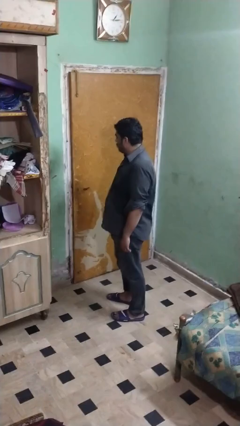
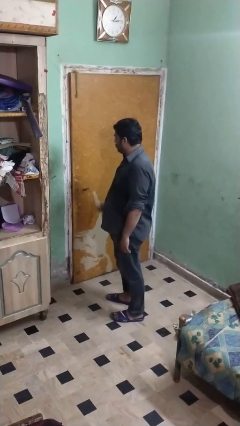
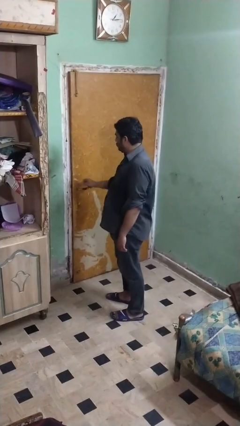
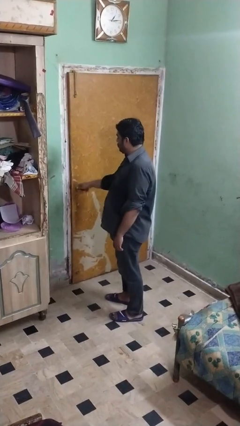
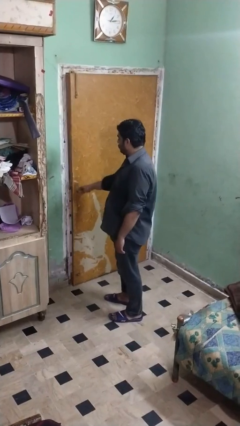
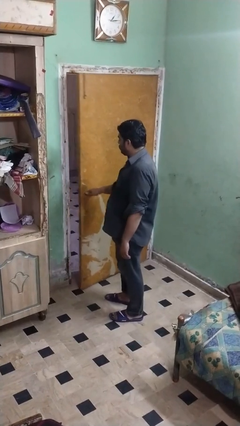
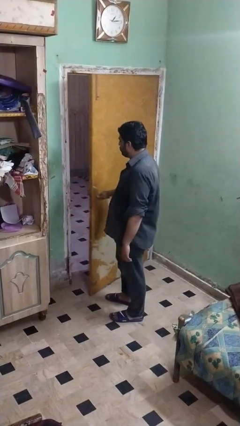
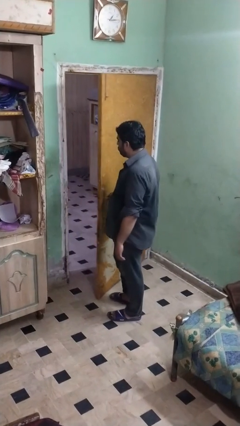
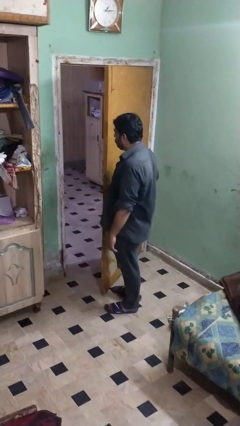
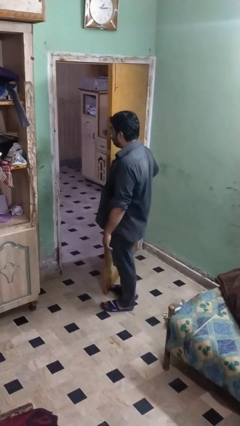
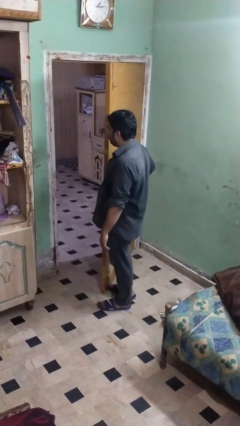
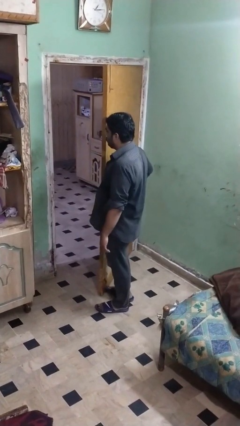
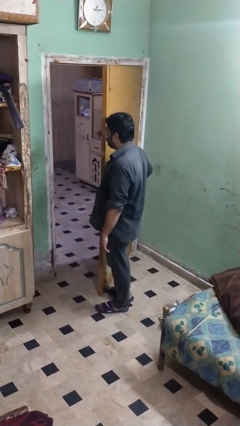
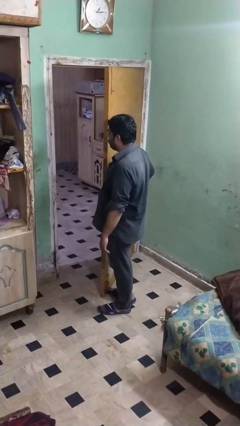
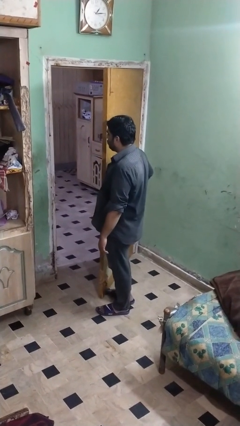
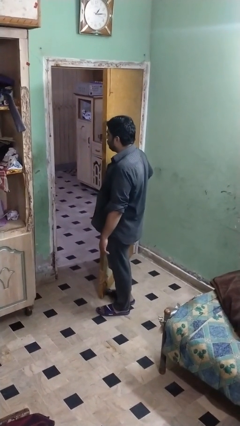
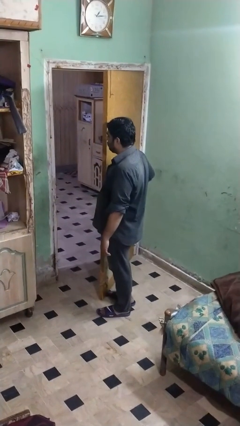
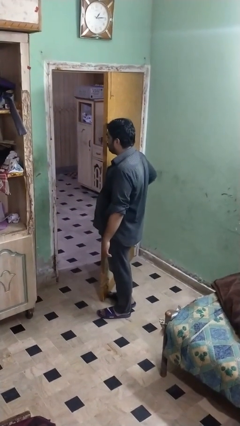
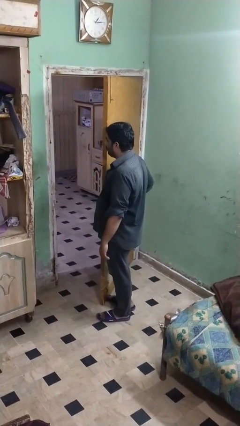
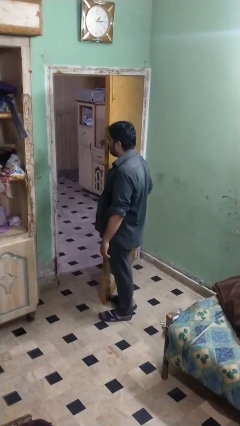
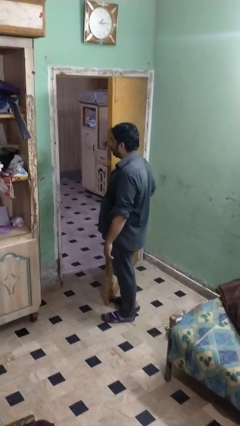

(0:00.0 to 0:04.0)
person opens facility door

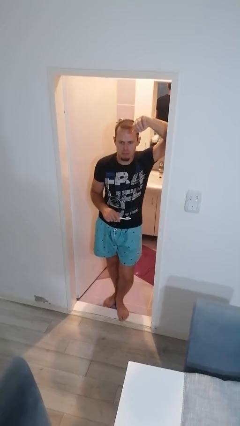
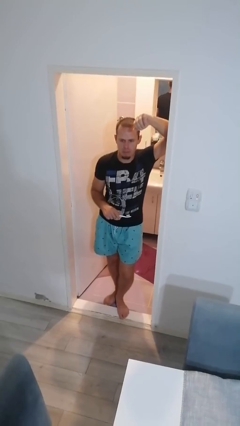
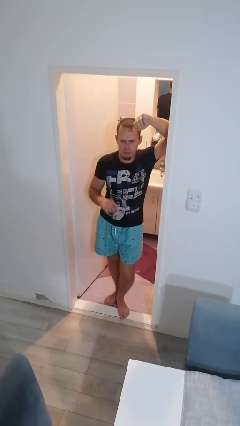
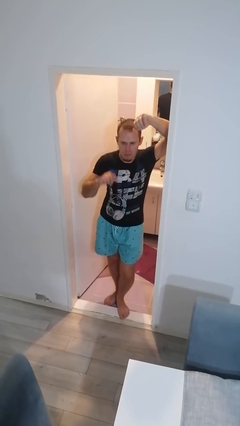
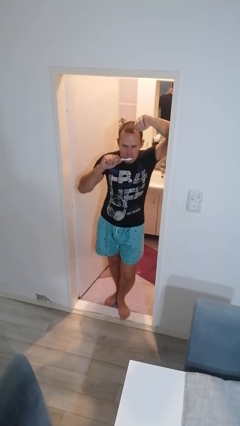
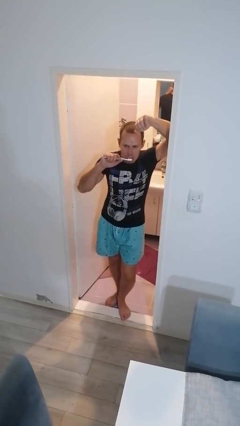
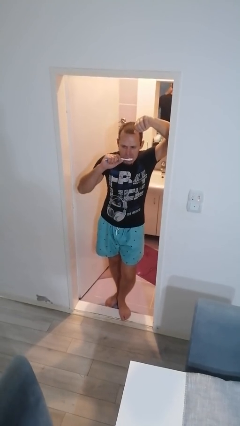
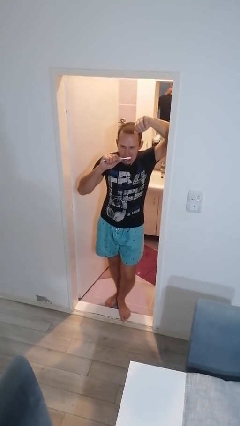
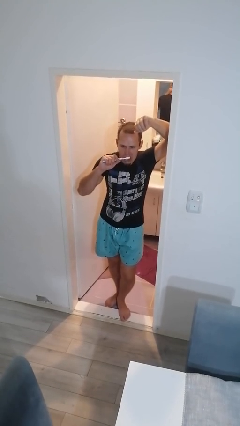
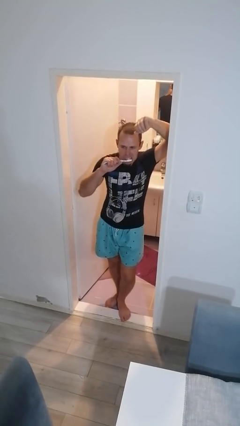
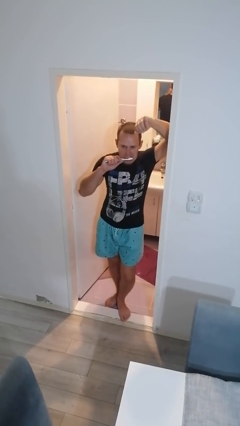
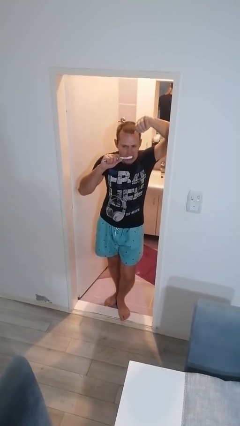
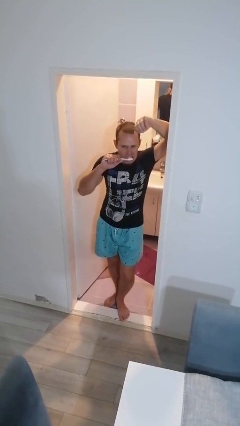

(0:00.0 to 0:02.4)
person brushes teeth

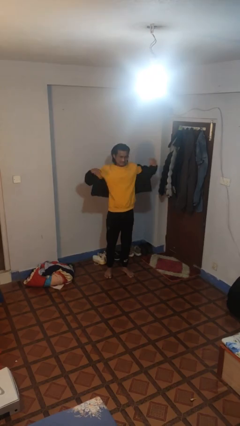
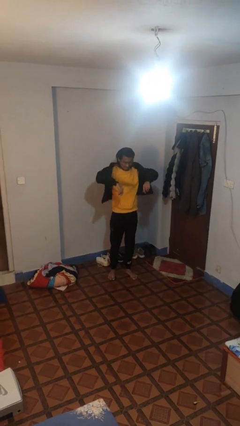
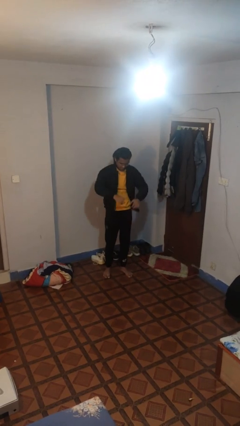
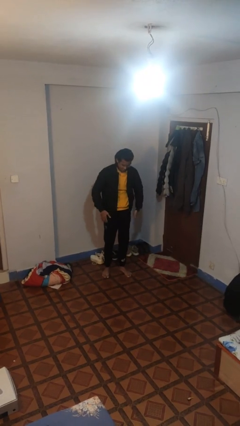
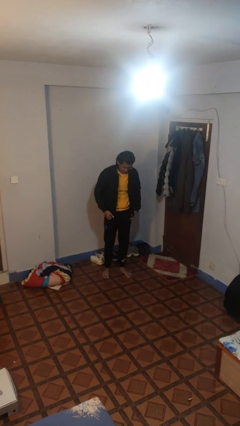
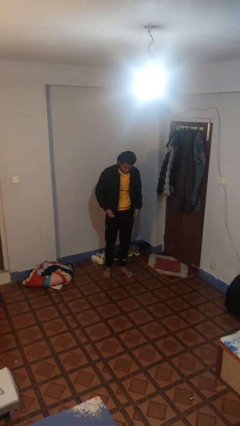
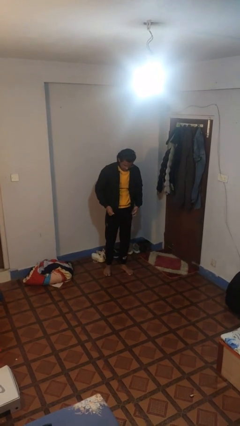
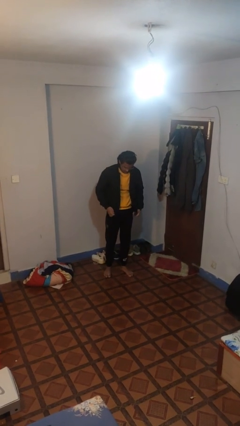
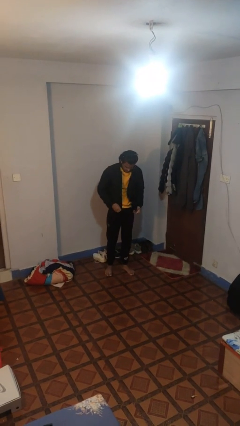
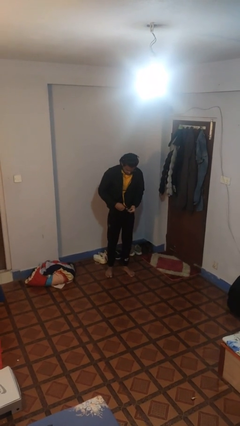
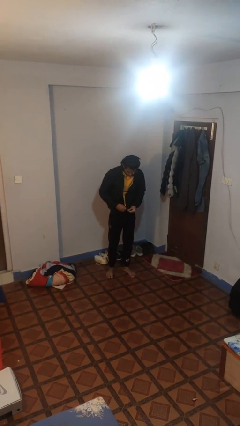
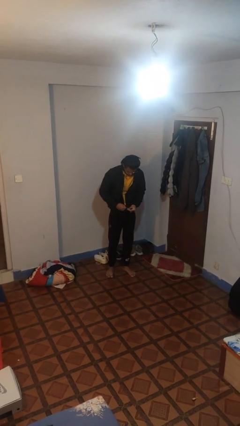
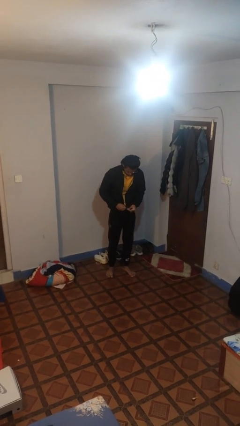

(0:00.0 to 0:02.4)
person puts on jacket

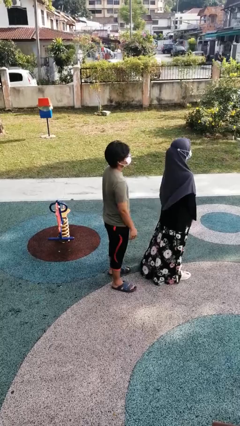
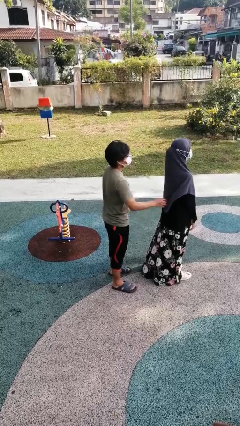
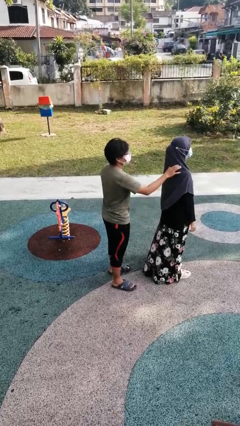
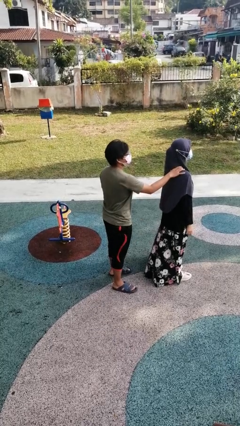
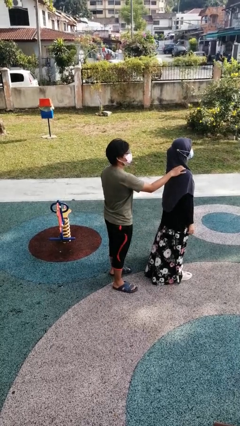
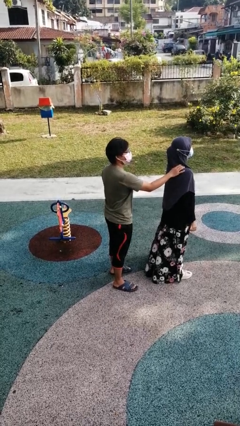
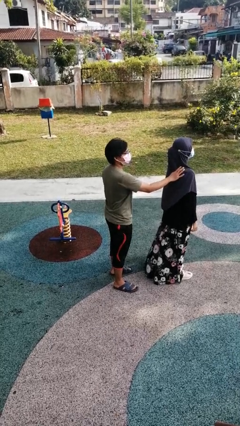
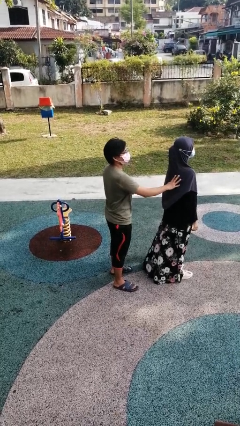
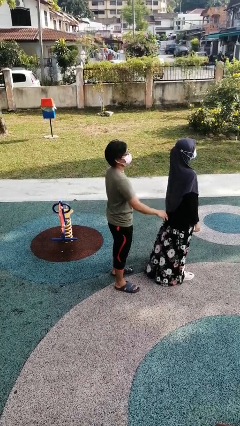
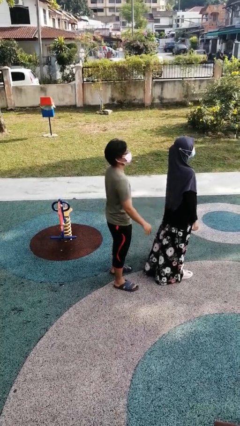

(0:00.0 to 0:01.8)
person touches back of person

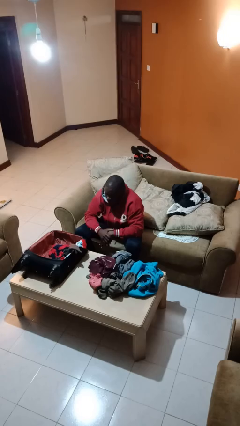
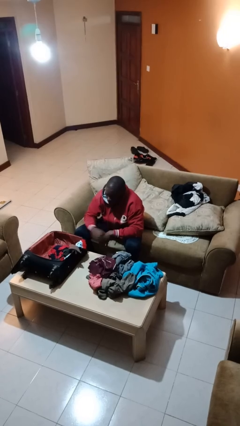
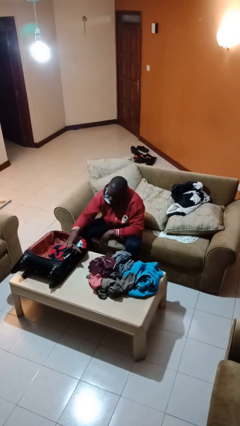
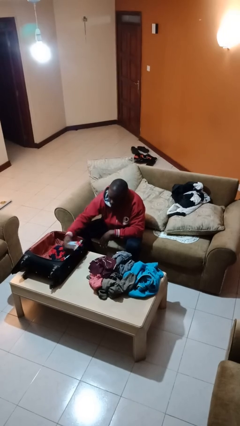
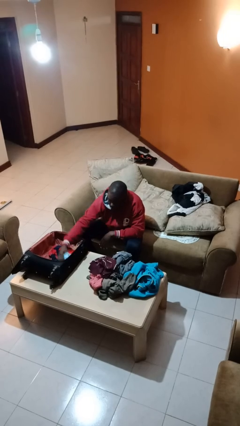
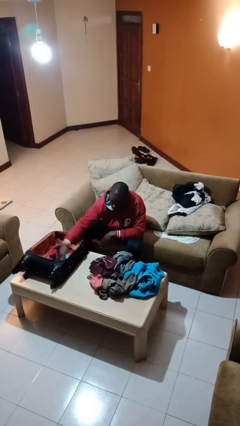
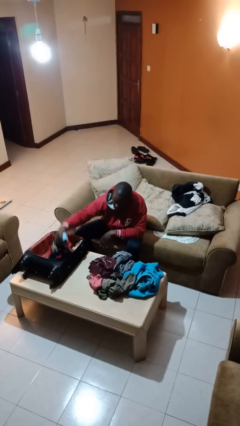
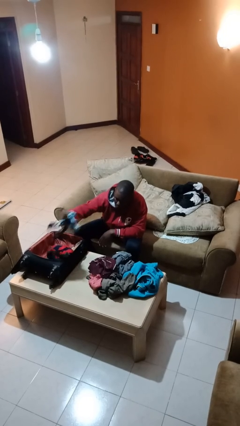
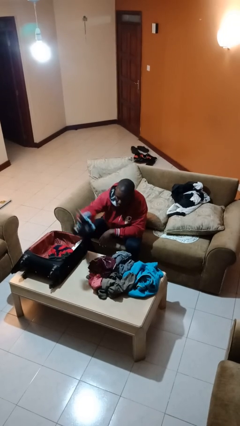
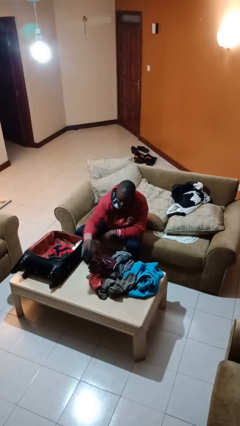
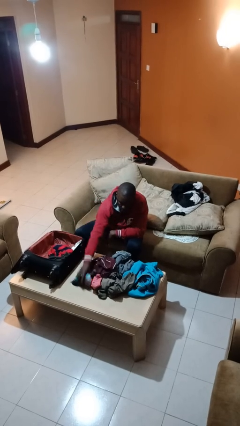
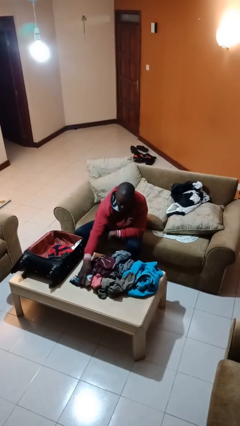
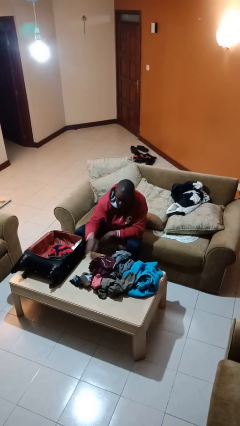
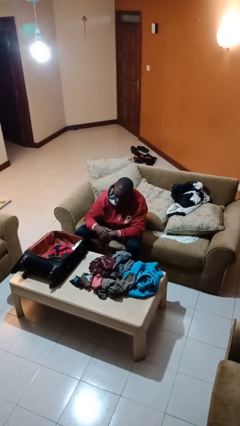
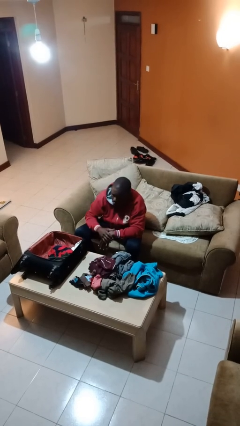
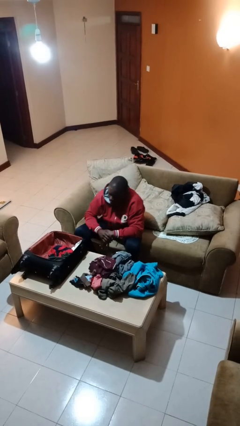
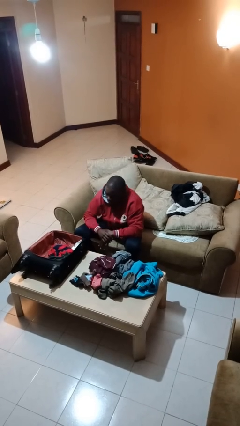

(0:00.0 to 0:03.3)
person unloads clothes from suitcase

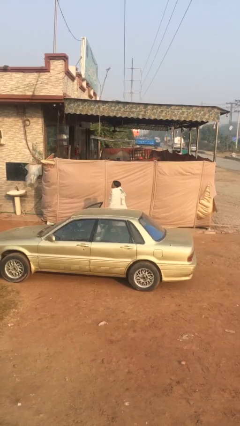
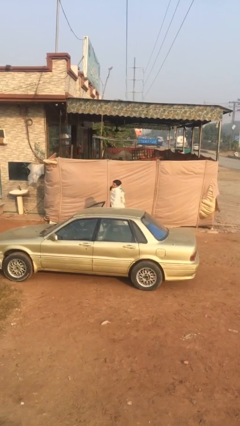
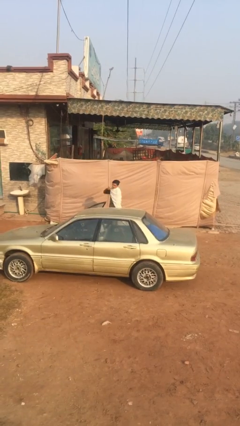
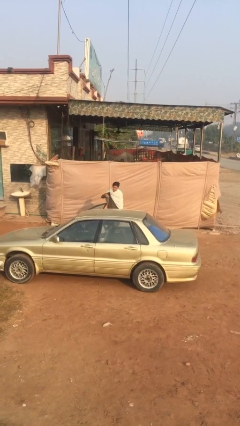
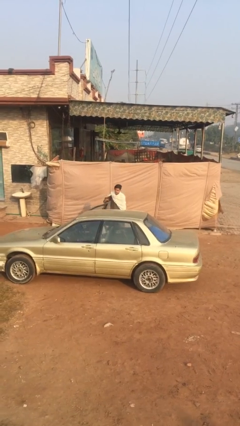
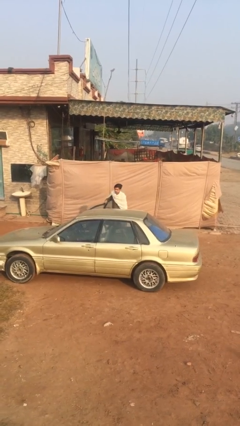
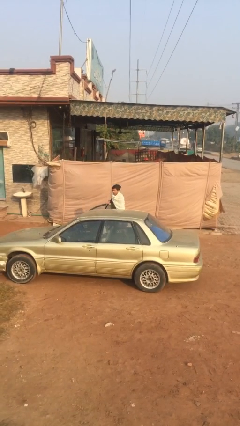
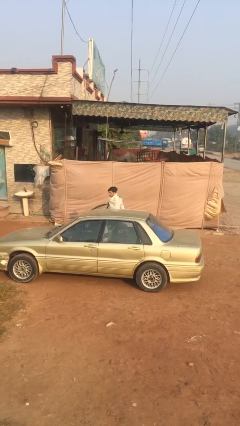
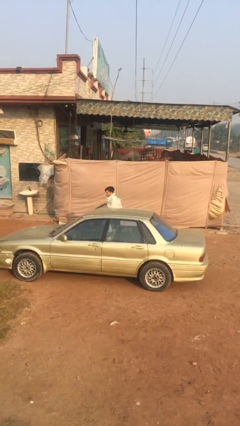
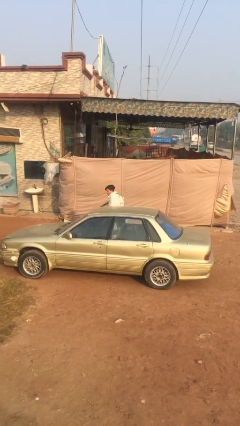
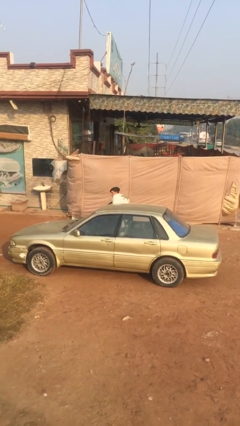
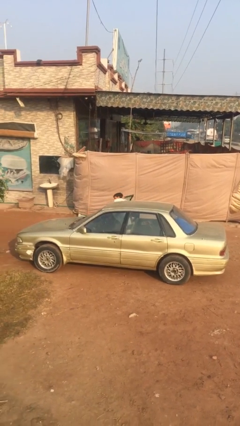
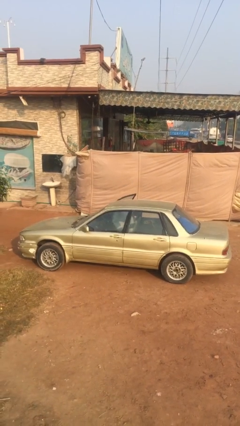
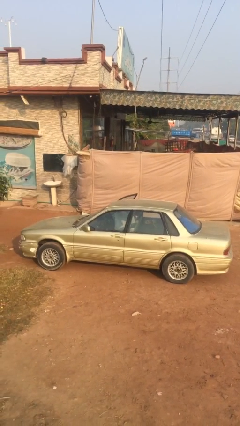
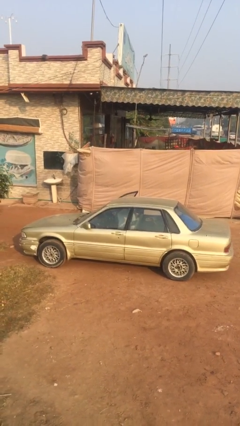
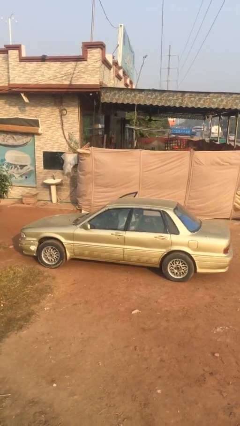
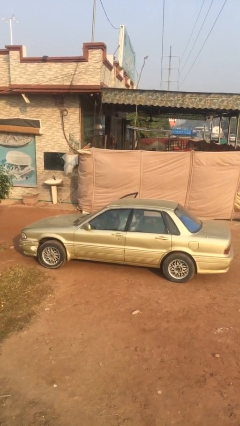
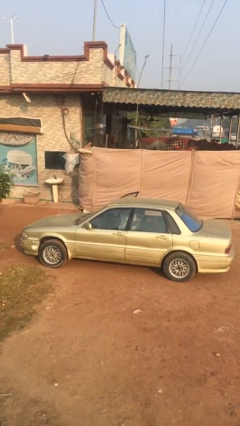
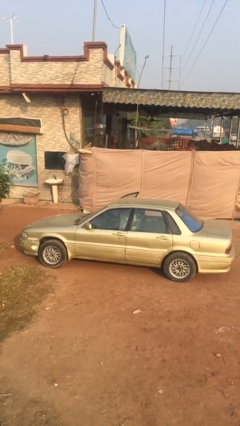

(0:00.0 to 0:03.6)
person enters car
